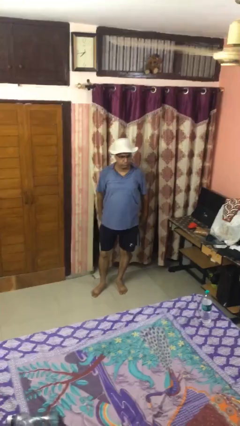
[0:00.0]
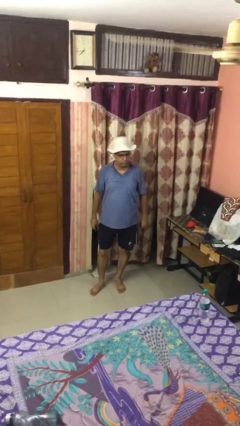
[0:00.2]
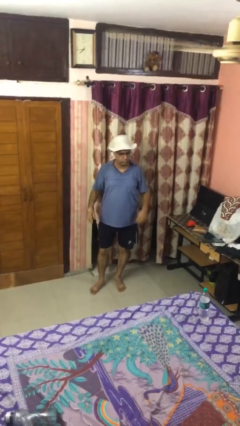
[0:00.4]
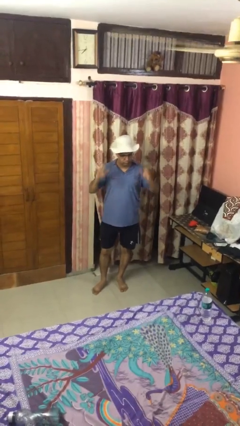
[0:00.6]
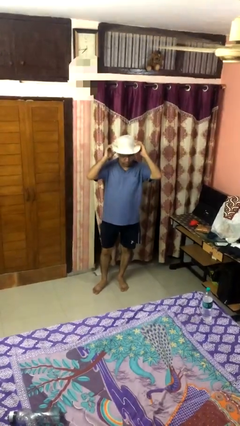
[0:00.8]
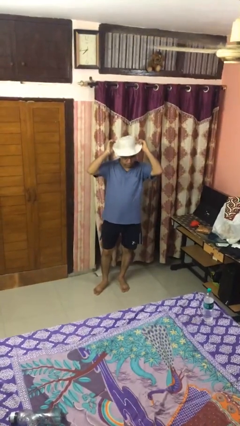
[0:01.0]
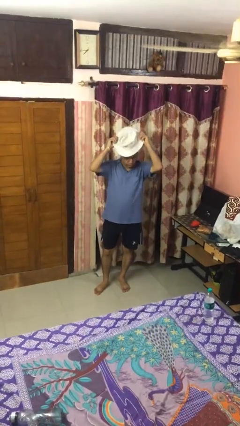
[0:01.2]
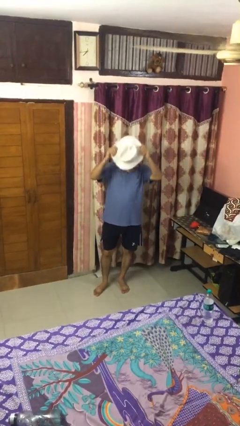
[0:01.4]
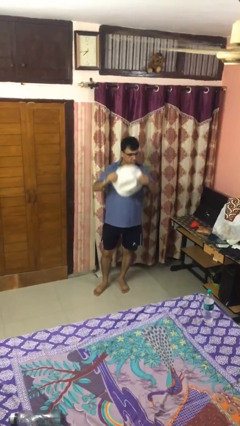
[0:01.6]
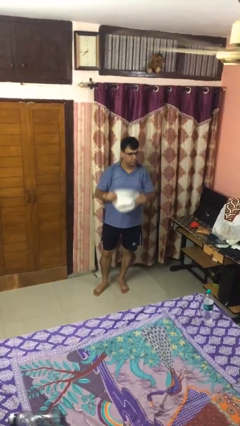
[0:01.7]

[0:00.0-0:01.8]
person takes off hat

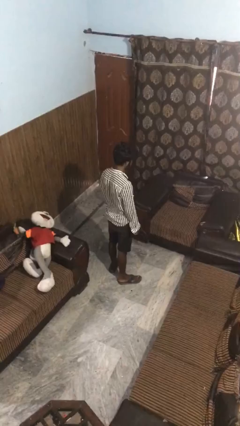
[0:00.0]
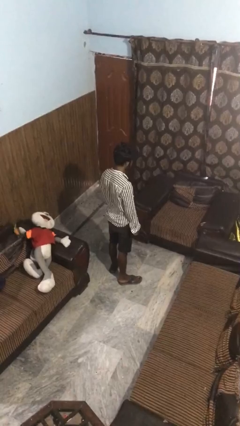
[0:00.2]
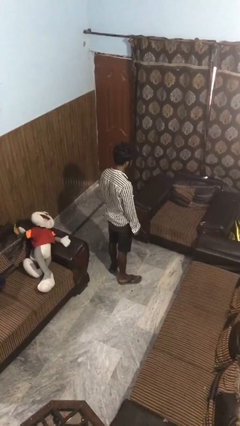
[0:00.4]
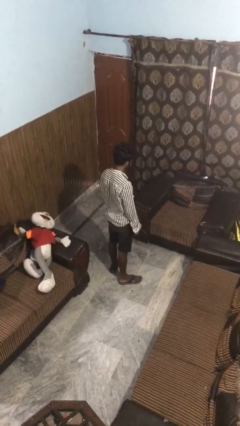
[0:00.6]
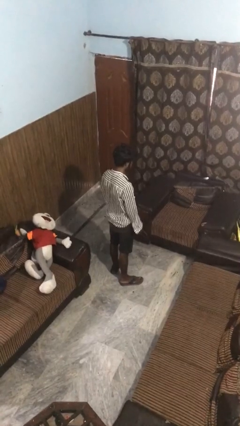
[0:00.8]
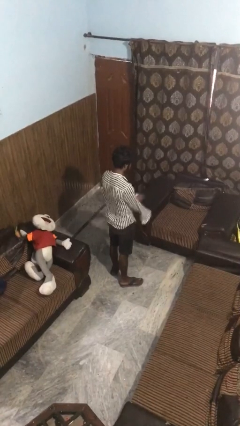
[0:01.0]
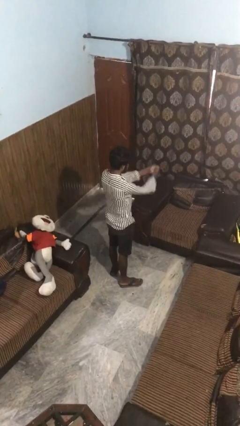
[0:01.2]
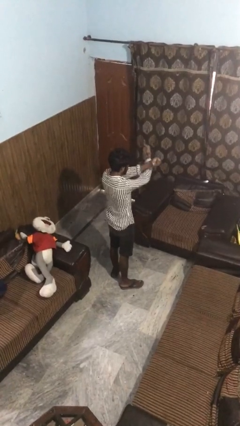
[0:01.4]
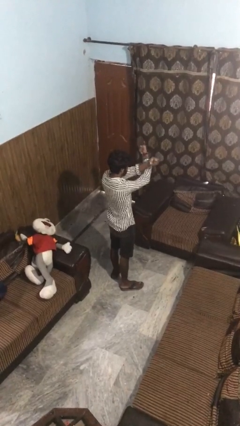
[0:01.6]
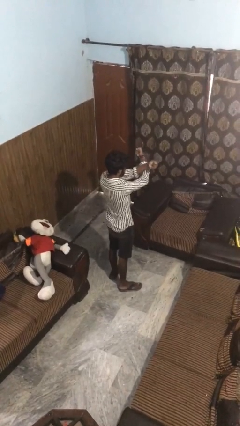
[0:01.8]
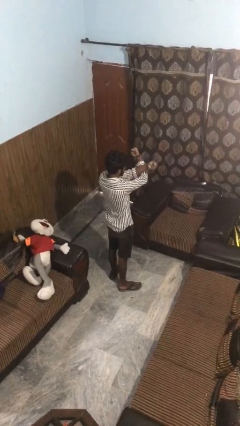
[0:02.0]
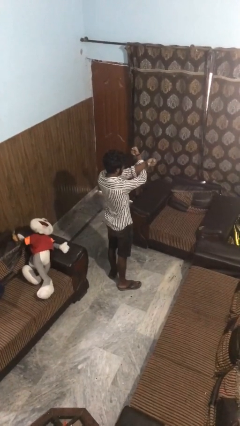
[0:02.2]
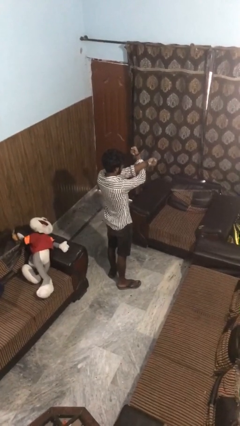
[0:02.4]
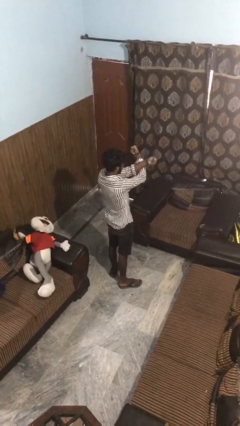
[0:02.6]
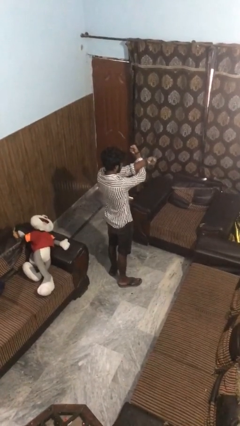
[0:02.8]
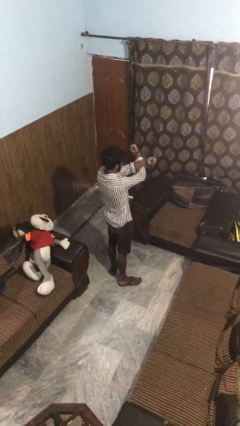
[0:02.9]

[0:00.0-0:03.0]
person gestures arms x

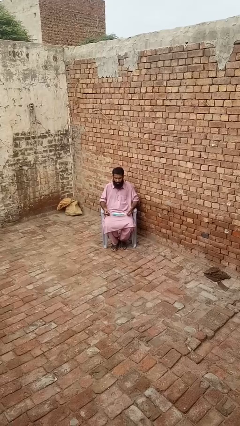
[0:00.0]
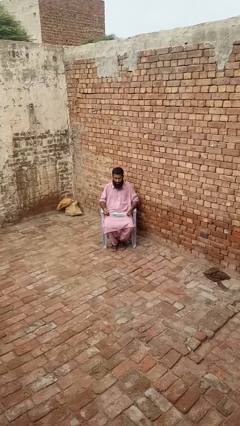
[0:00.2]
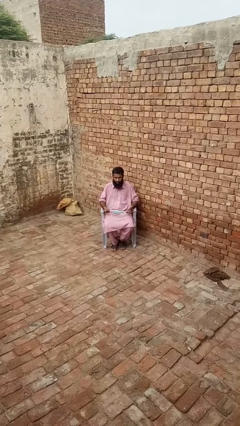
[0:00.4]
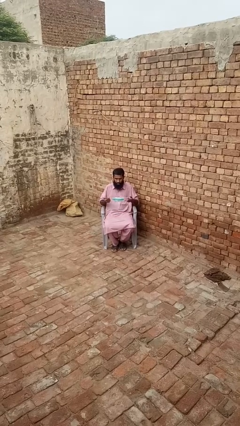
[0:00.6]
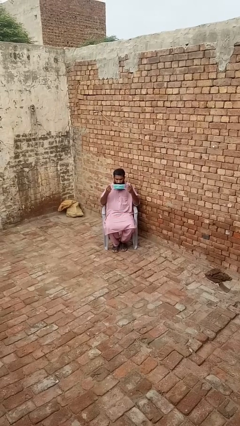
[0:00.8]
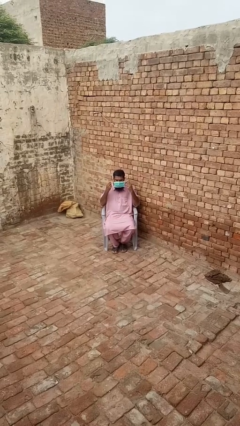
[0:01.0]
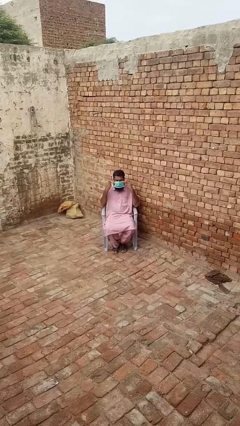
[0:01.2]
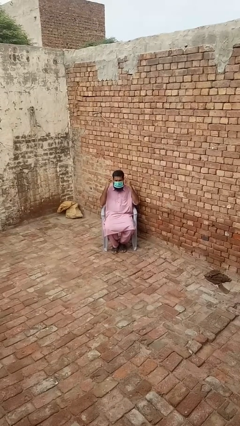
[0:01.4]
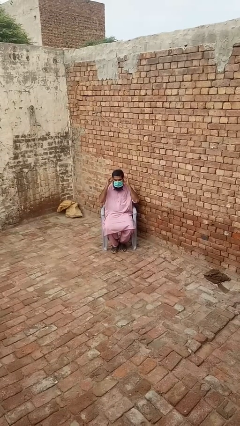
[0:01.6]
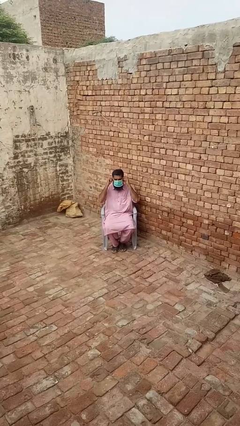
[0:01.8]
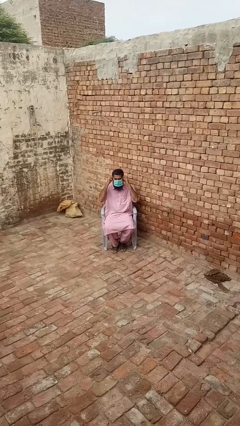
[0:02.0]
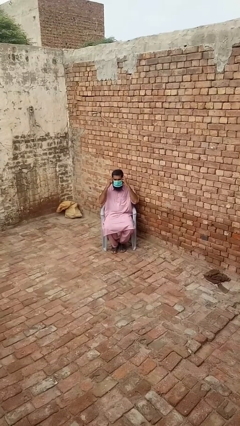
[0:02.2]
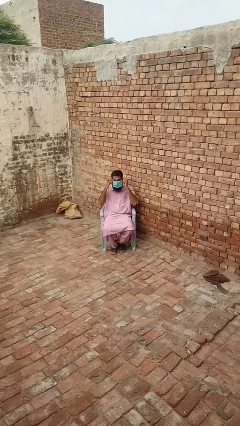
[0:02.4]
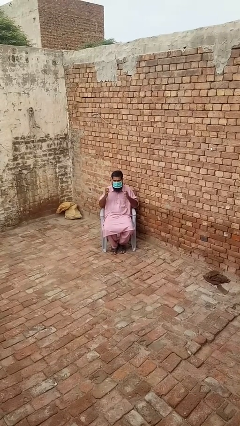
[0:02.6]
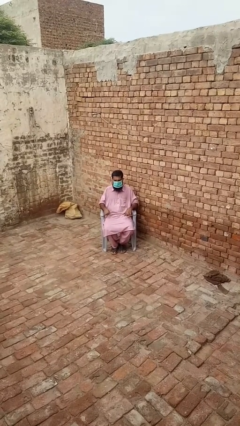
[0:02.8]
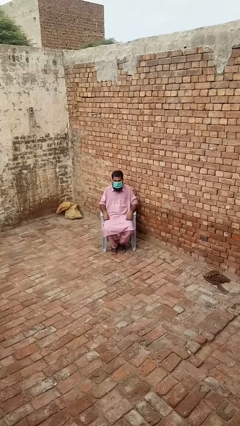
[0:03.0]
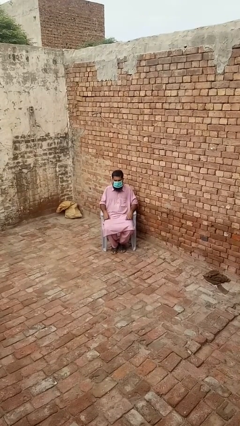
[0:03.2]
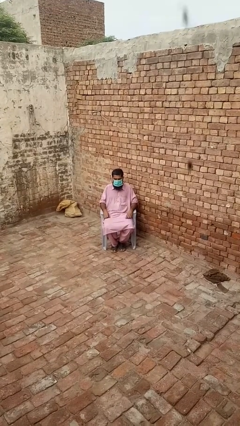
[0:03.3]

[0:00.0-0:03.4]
person puts on facemask

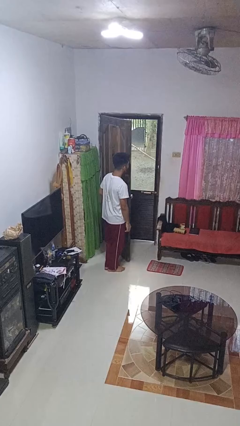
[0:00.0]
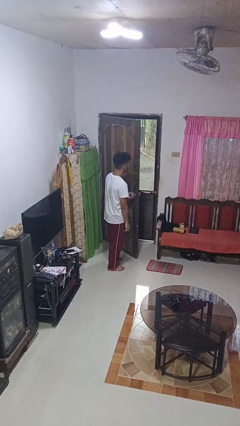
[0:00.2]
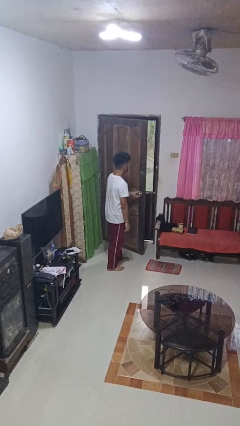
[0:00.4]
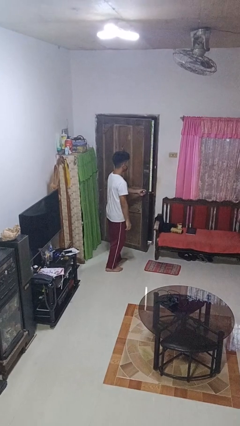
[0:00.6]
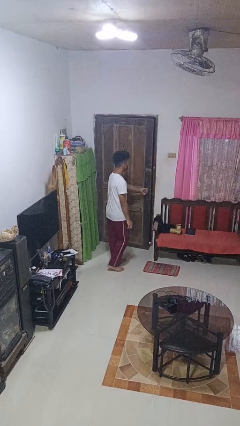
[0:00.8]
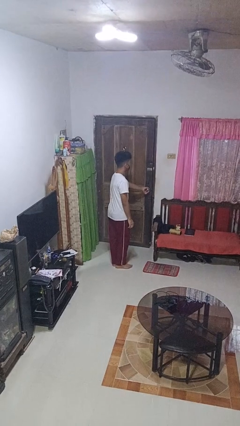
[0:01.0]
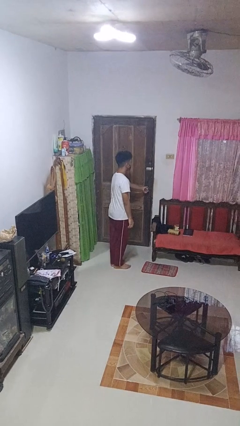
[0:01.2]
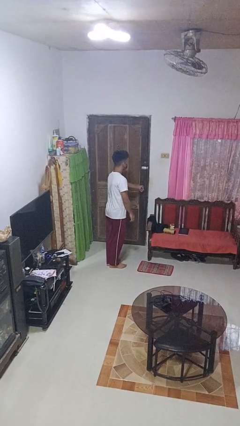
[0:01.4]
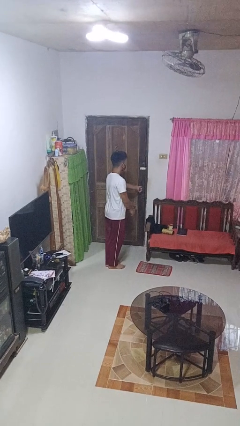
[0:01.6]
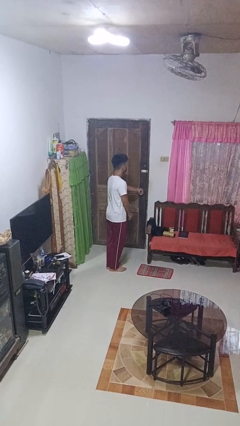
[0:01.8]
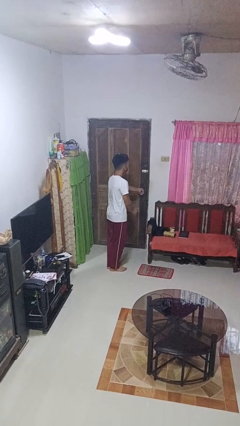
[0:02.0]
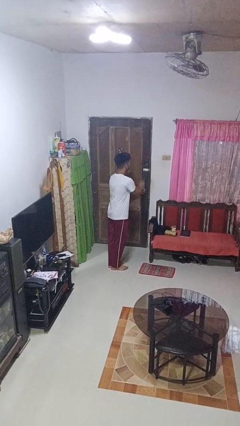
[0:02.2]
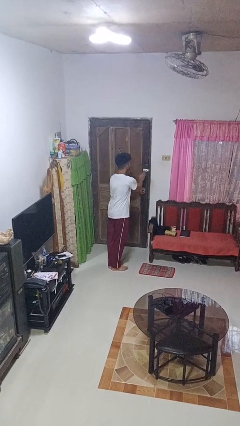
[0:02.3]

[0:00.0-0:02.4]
person closes facility door

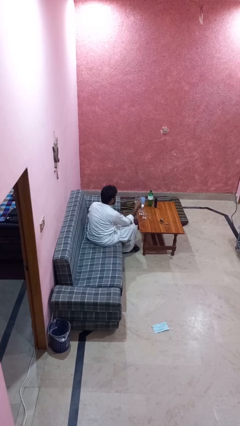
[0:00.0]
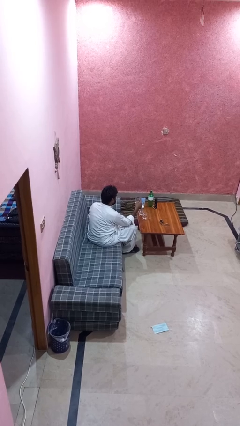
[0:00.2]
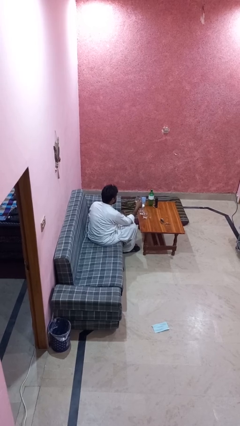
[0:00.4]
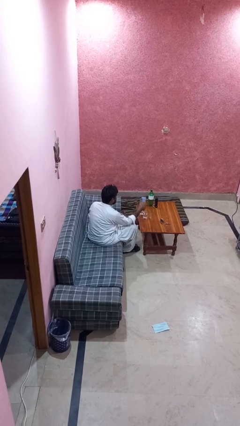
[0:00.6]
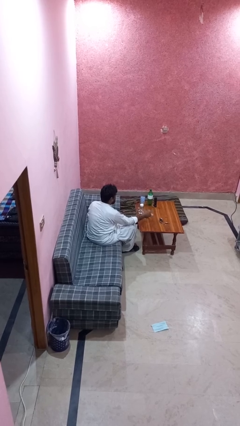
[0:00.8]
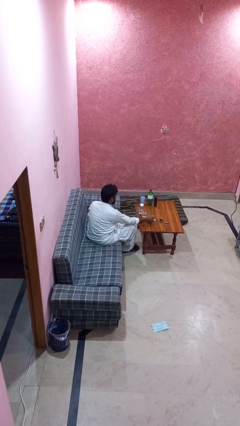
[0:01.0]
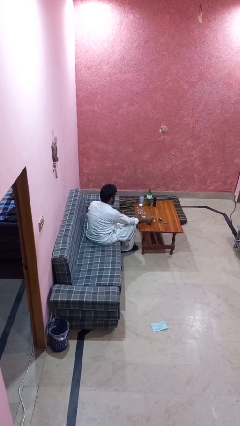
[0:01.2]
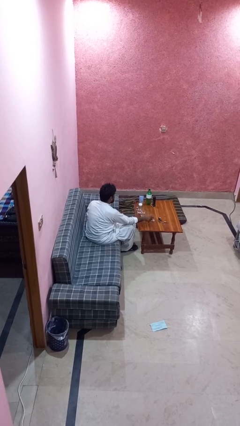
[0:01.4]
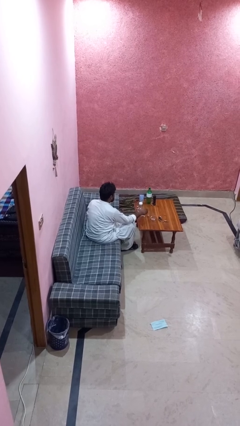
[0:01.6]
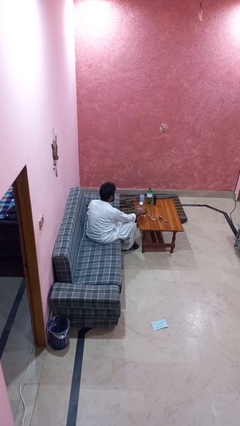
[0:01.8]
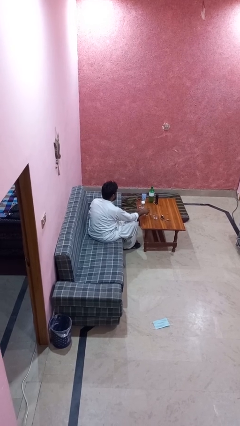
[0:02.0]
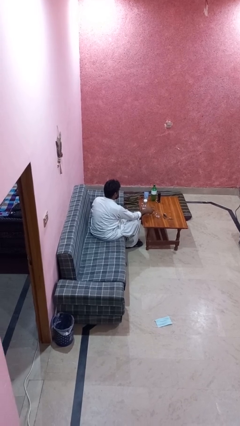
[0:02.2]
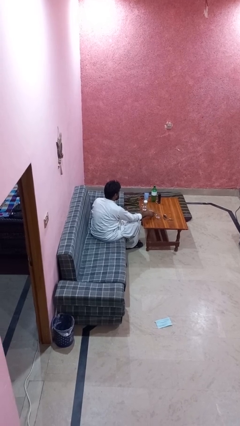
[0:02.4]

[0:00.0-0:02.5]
person puts down object on table

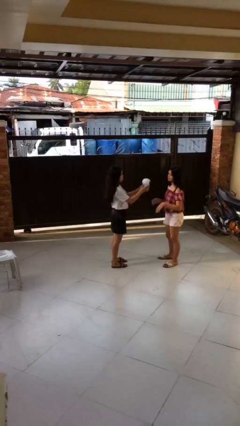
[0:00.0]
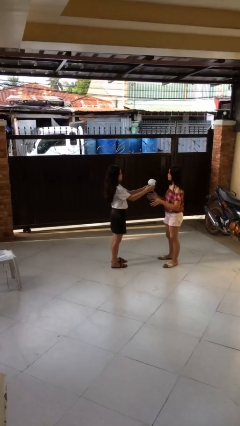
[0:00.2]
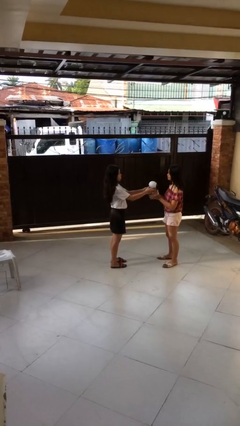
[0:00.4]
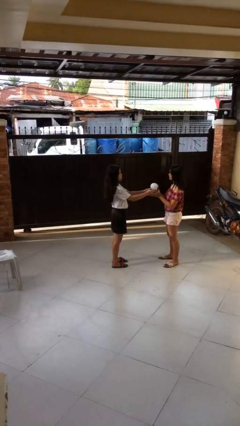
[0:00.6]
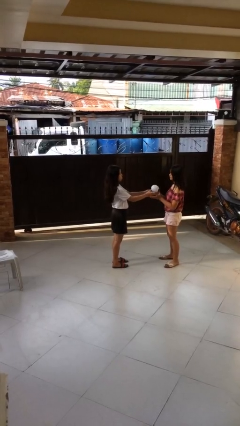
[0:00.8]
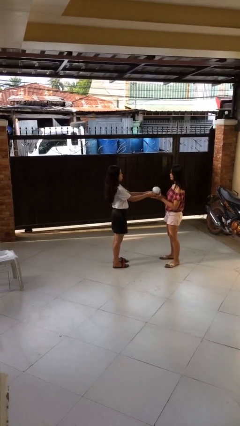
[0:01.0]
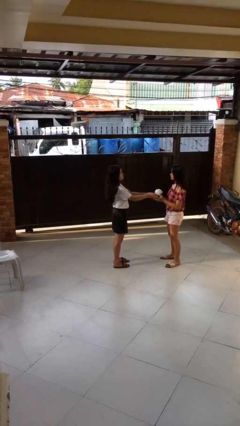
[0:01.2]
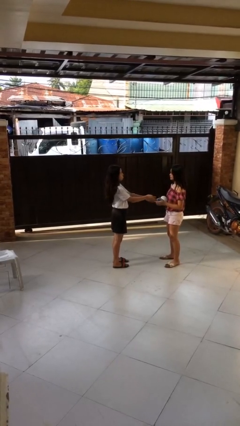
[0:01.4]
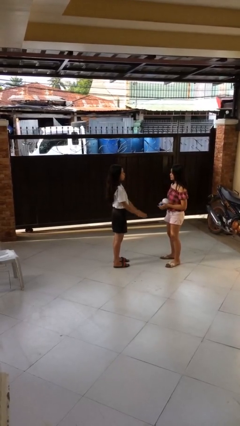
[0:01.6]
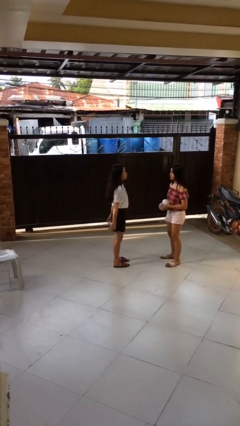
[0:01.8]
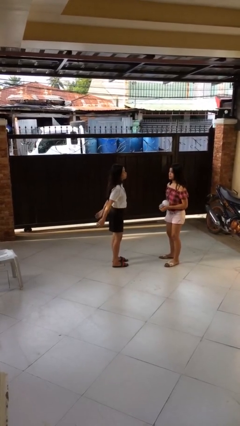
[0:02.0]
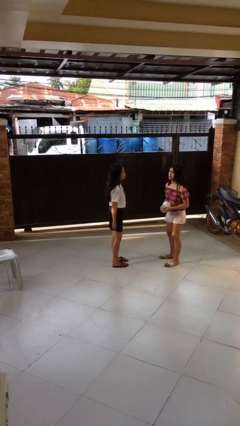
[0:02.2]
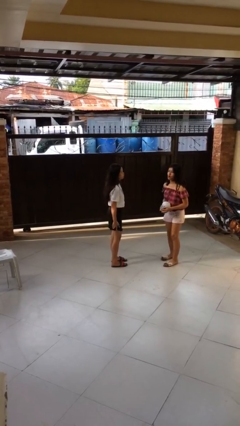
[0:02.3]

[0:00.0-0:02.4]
person transfers object to person

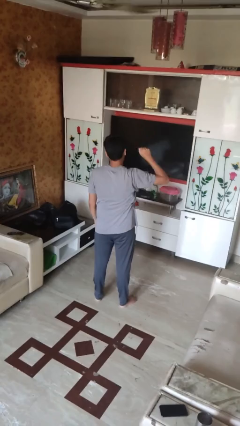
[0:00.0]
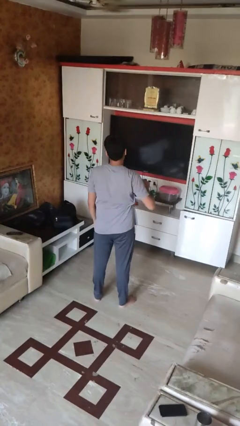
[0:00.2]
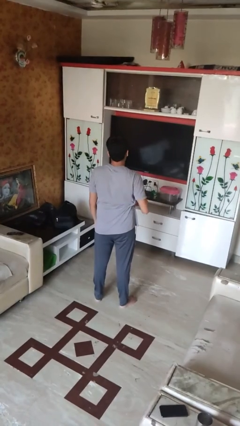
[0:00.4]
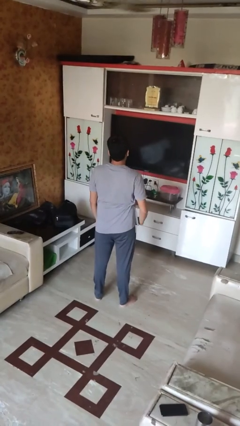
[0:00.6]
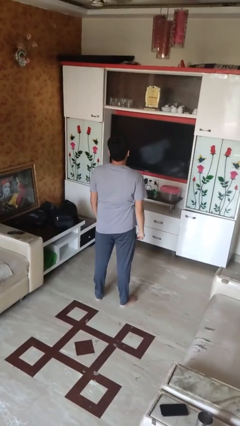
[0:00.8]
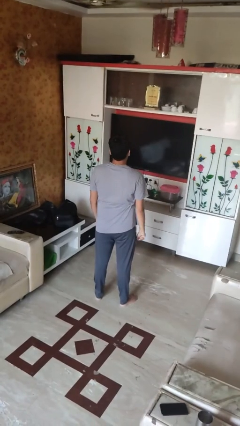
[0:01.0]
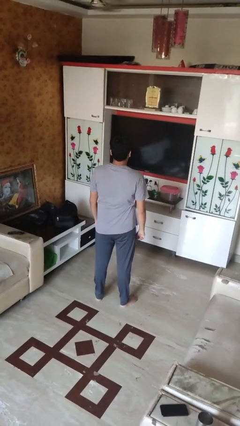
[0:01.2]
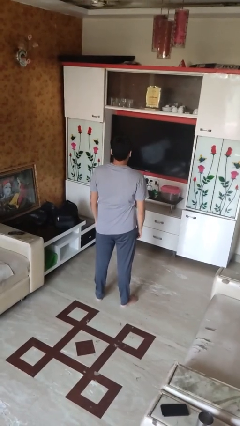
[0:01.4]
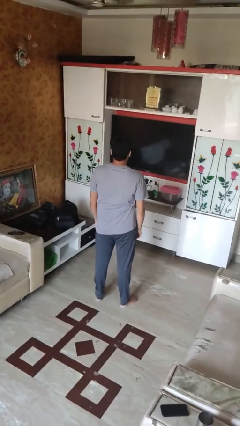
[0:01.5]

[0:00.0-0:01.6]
person gestures lower hand
